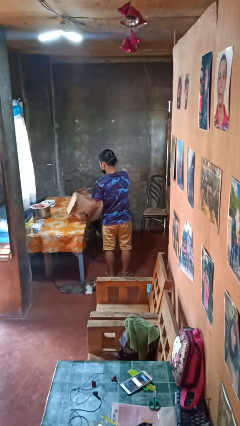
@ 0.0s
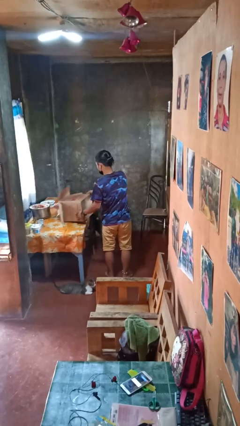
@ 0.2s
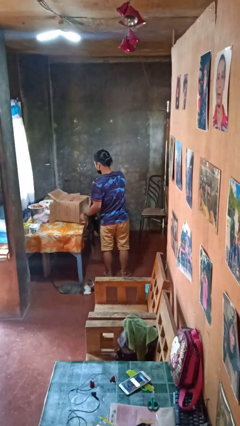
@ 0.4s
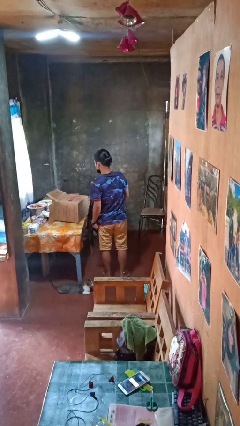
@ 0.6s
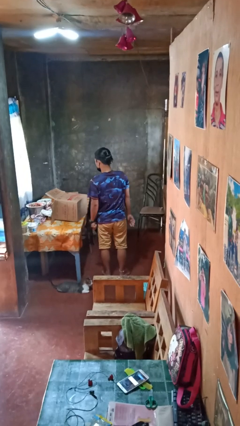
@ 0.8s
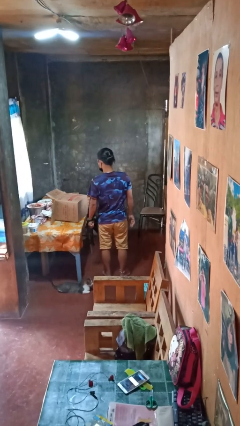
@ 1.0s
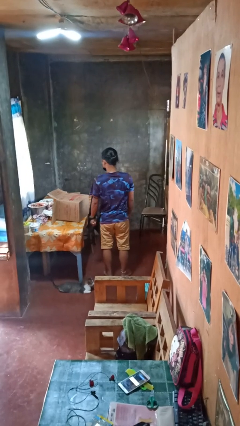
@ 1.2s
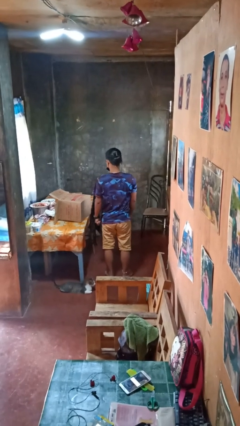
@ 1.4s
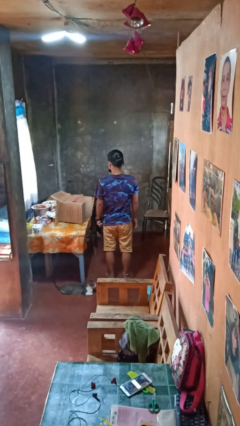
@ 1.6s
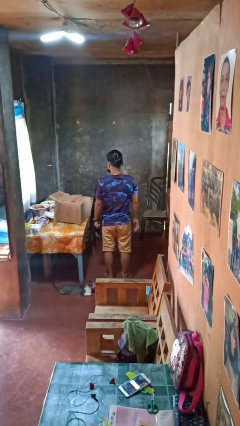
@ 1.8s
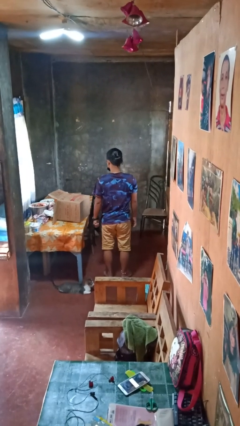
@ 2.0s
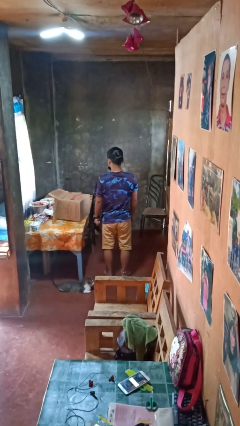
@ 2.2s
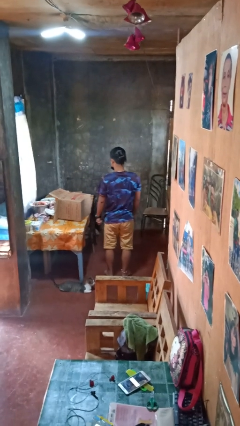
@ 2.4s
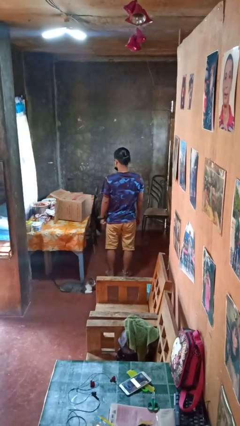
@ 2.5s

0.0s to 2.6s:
person unloads box onto table

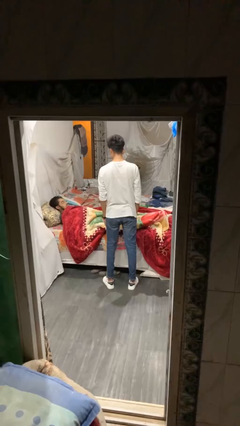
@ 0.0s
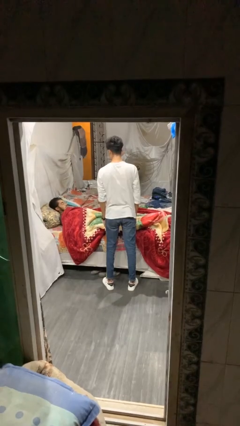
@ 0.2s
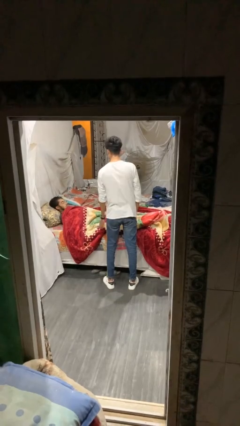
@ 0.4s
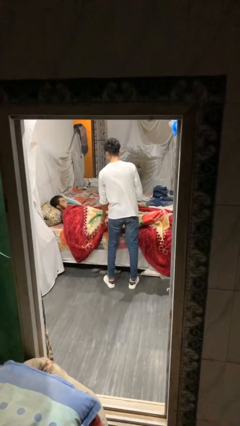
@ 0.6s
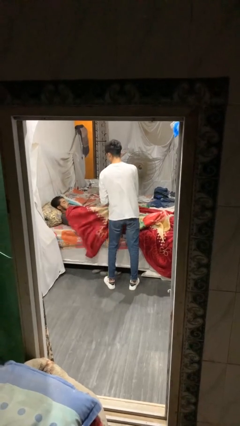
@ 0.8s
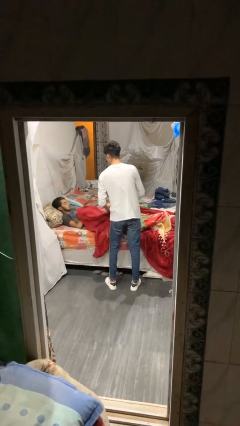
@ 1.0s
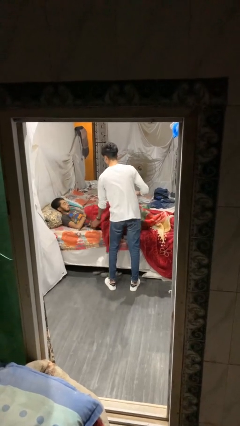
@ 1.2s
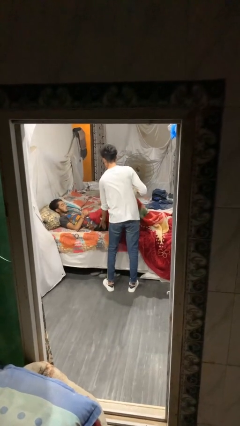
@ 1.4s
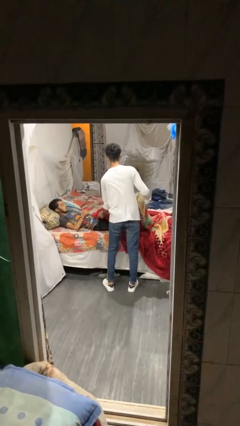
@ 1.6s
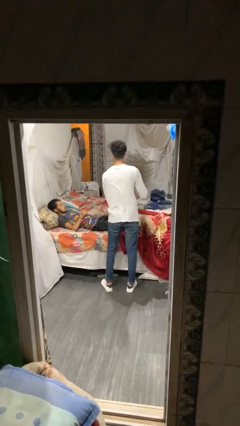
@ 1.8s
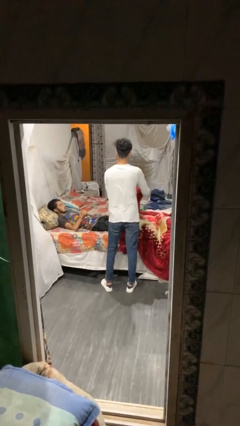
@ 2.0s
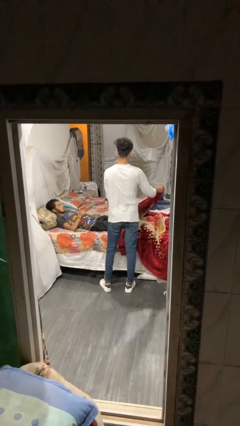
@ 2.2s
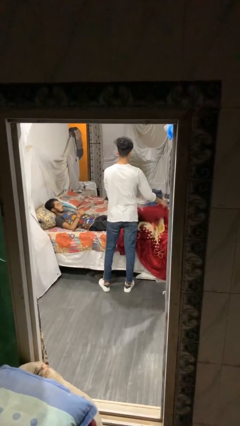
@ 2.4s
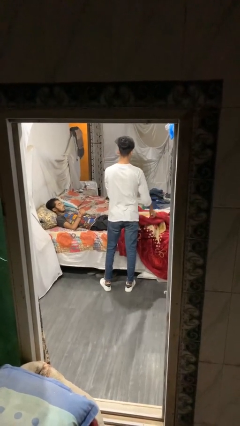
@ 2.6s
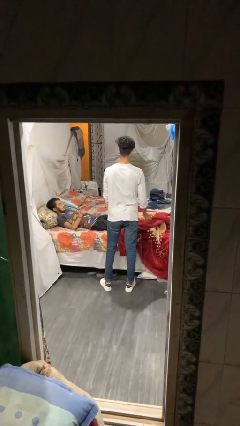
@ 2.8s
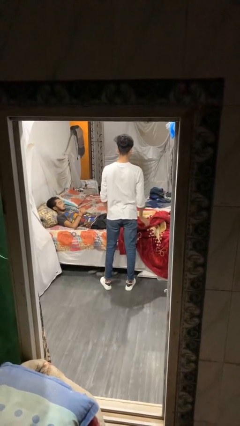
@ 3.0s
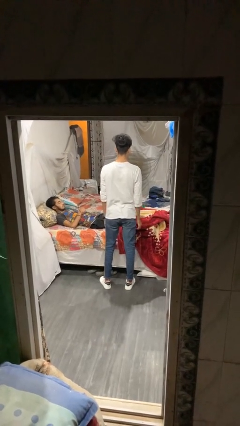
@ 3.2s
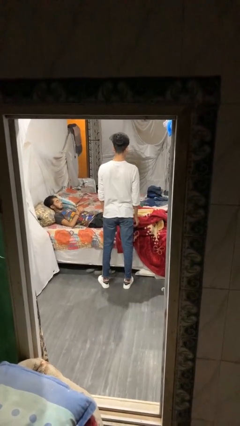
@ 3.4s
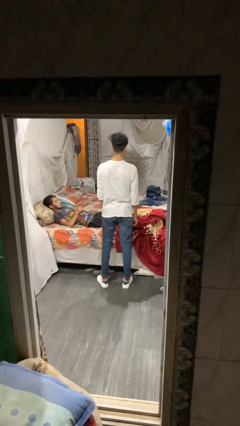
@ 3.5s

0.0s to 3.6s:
person uncovers friend with blanket

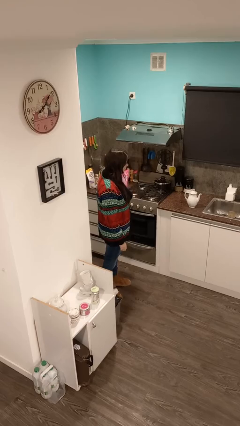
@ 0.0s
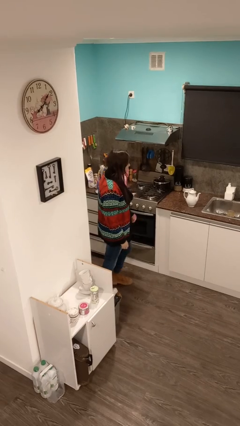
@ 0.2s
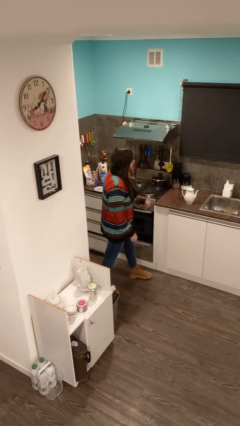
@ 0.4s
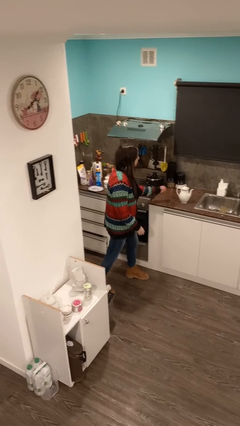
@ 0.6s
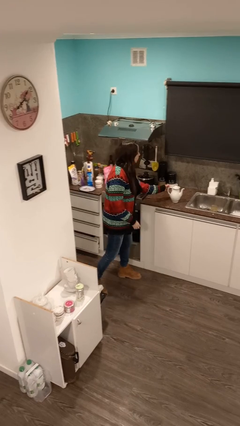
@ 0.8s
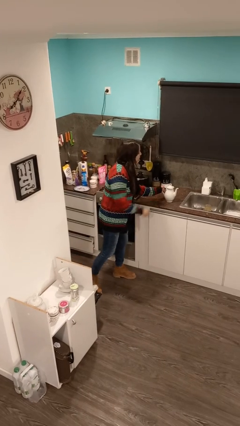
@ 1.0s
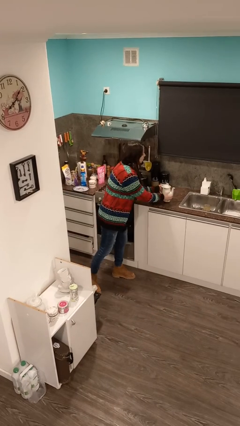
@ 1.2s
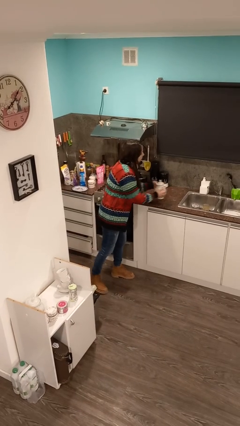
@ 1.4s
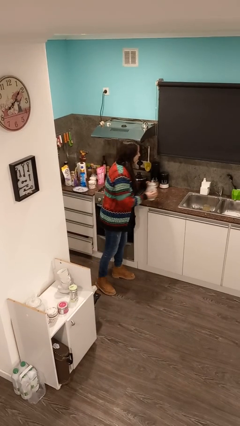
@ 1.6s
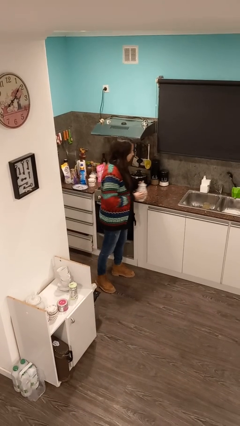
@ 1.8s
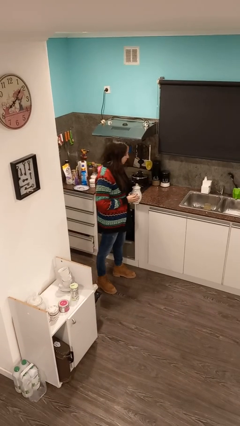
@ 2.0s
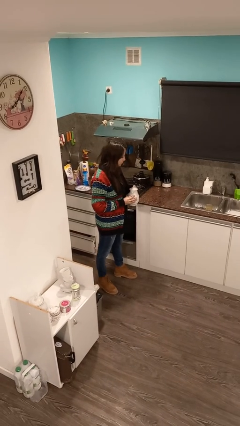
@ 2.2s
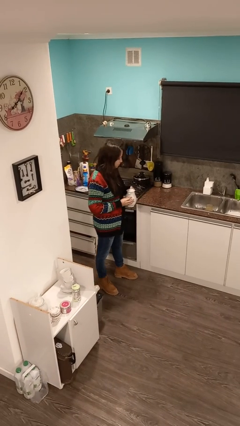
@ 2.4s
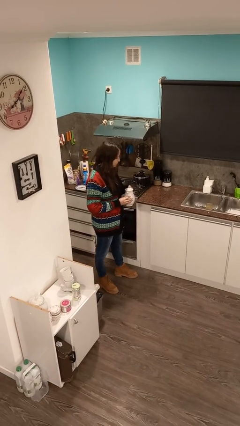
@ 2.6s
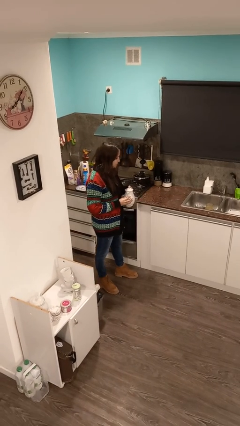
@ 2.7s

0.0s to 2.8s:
person picks up object from countertop

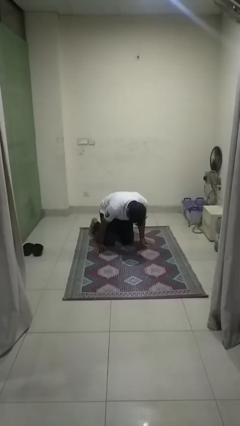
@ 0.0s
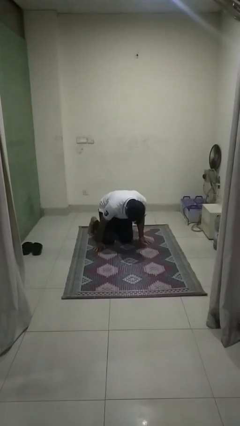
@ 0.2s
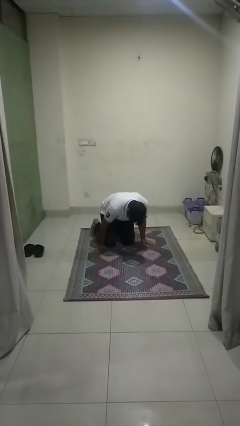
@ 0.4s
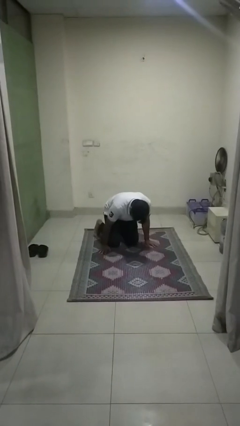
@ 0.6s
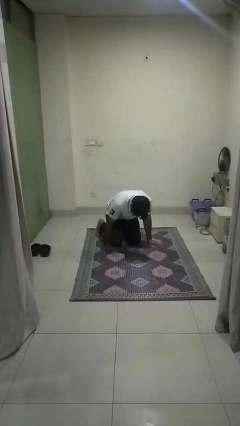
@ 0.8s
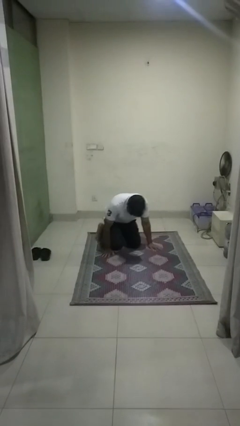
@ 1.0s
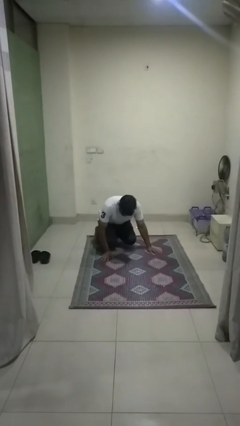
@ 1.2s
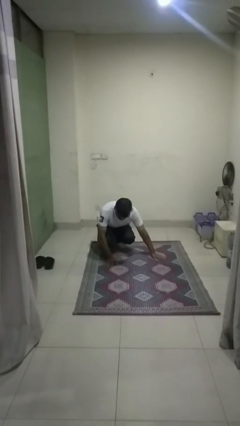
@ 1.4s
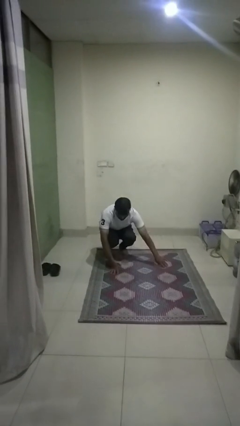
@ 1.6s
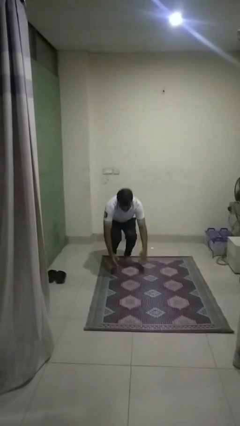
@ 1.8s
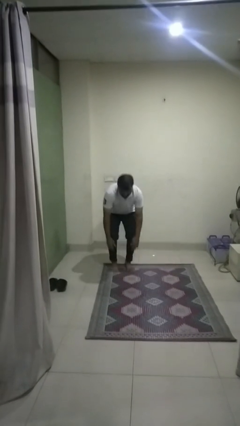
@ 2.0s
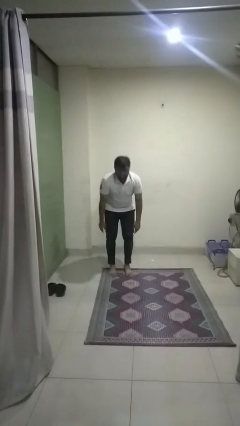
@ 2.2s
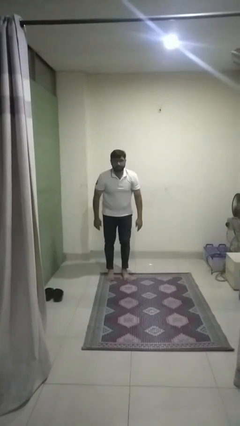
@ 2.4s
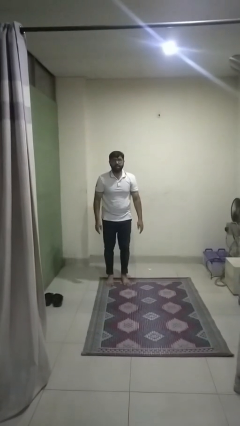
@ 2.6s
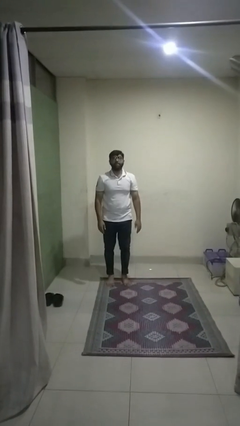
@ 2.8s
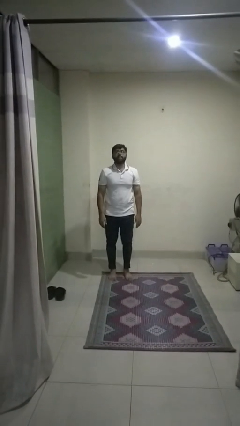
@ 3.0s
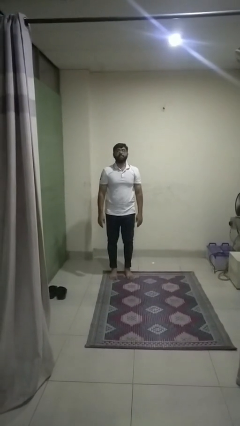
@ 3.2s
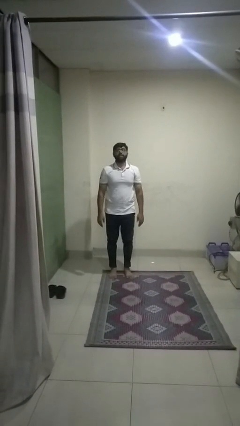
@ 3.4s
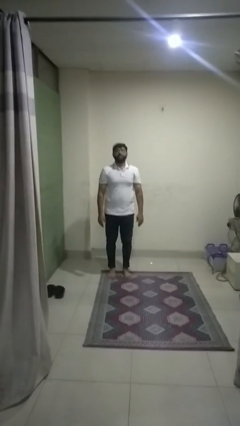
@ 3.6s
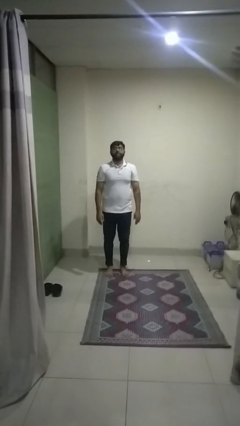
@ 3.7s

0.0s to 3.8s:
person stands up from floor

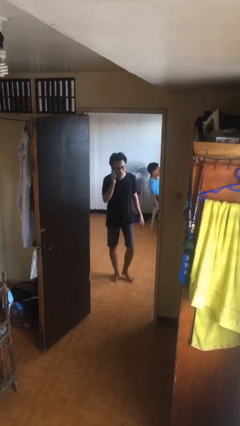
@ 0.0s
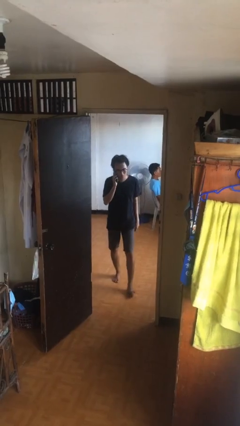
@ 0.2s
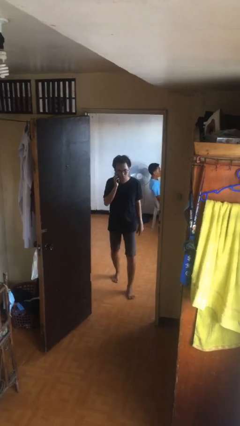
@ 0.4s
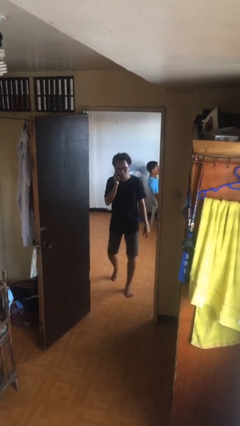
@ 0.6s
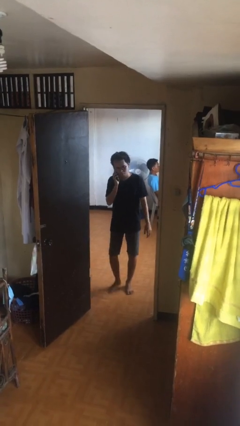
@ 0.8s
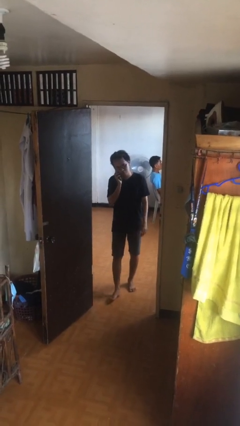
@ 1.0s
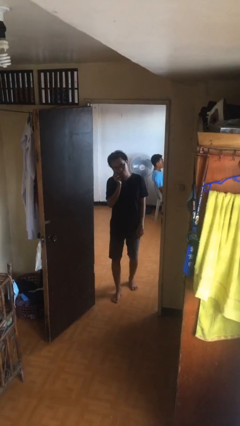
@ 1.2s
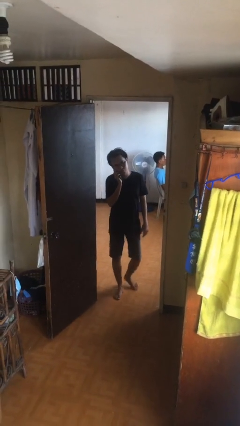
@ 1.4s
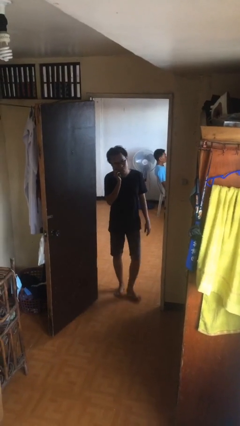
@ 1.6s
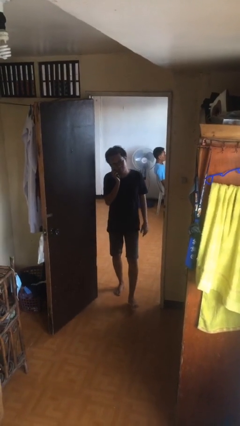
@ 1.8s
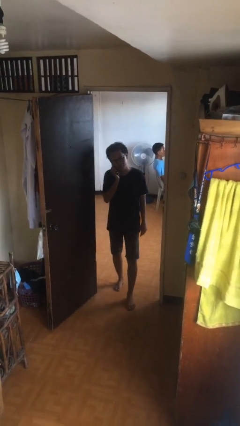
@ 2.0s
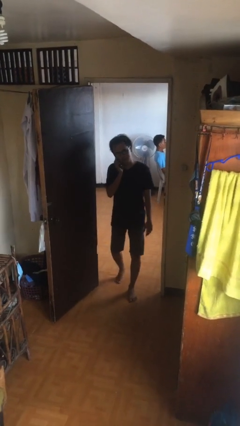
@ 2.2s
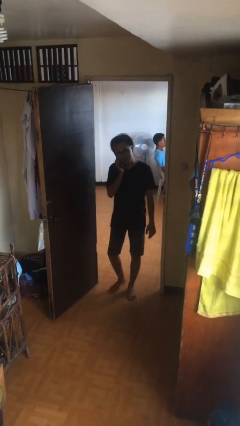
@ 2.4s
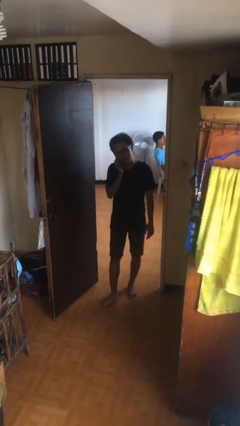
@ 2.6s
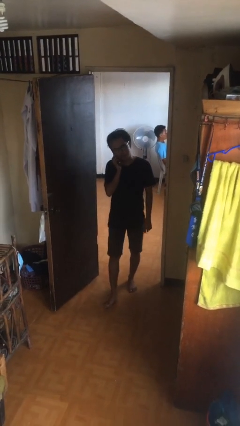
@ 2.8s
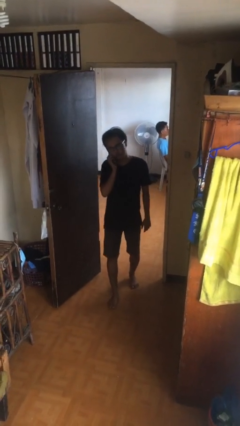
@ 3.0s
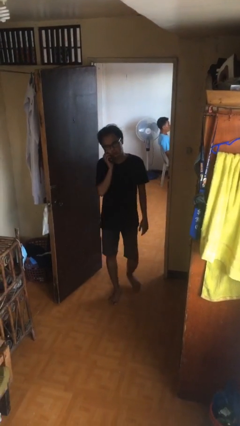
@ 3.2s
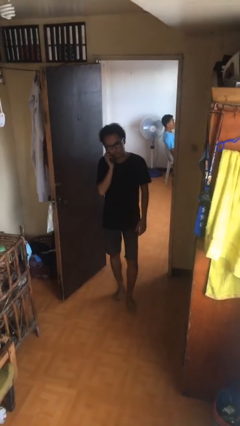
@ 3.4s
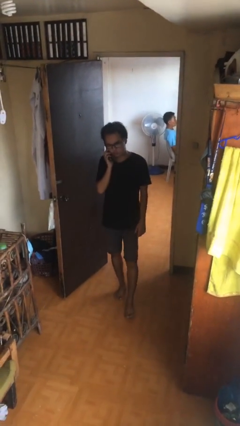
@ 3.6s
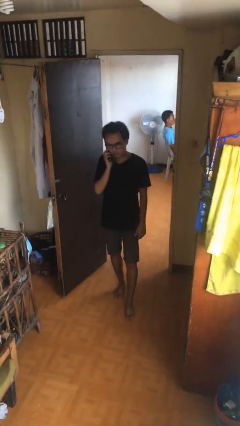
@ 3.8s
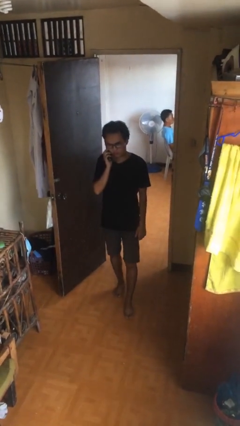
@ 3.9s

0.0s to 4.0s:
person enters scene through structure

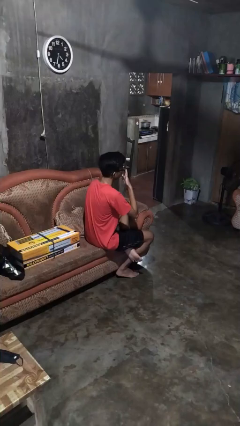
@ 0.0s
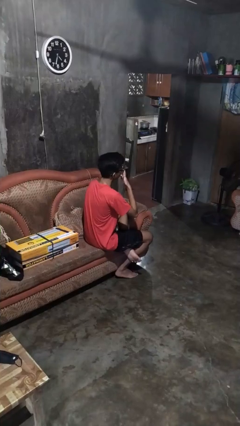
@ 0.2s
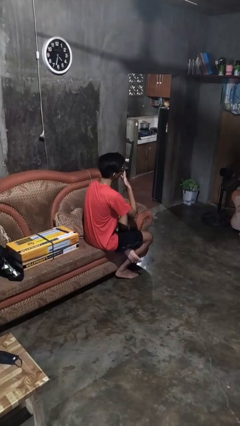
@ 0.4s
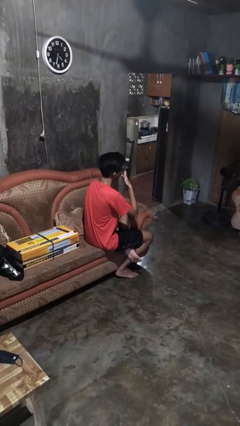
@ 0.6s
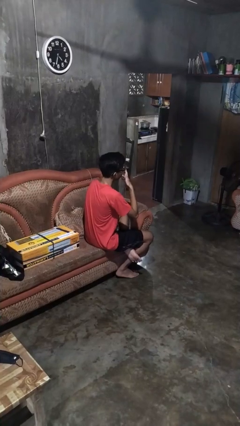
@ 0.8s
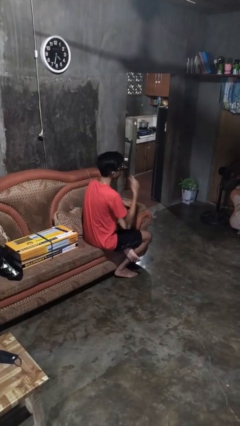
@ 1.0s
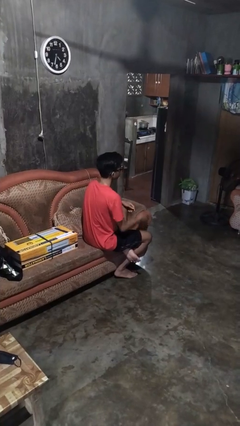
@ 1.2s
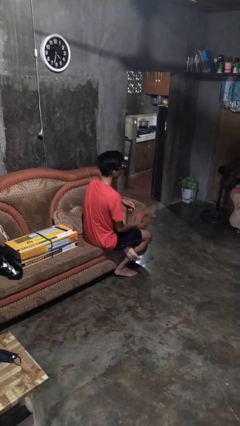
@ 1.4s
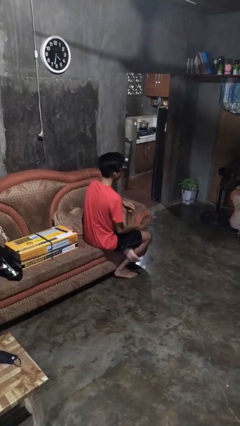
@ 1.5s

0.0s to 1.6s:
person licks fingers
